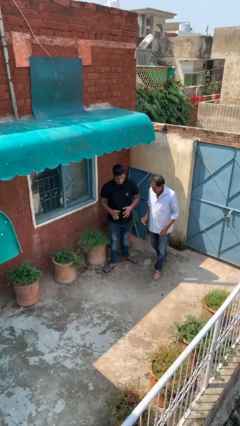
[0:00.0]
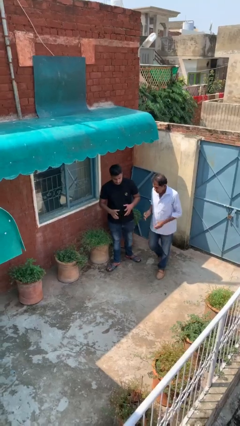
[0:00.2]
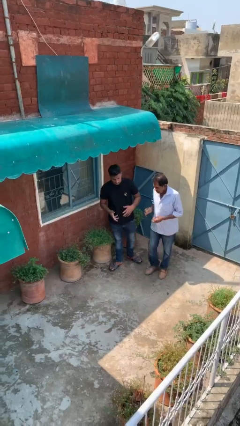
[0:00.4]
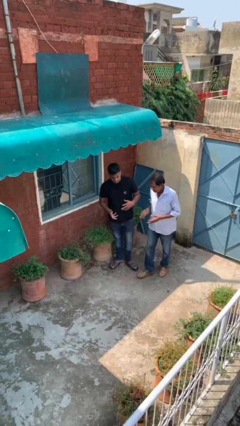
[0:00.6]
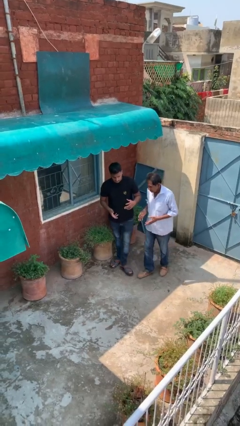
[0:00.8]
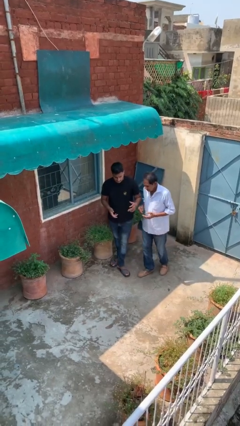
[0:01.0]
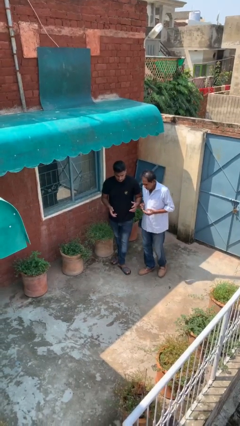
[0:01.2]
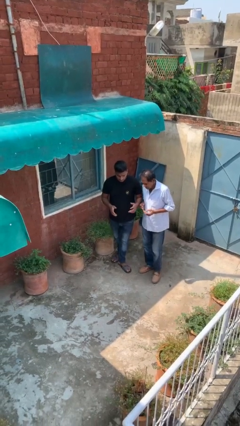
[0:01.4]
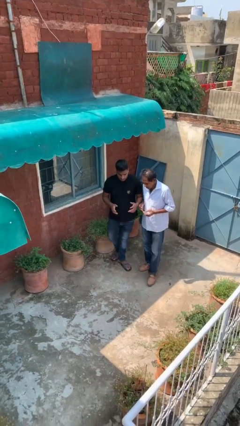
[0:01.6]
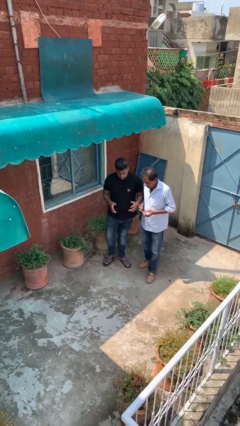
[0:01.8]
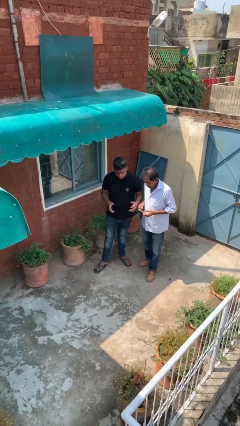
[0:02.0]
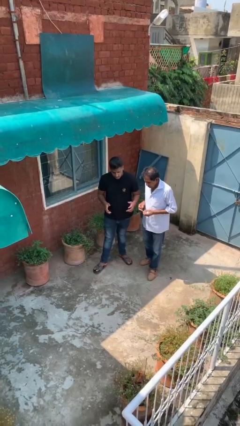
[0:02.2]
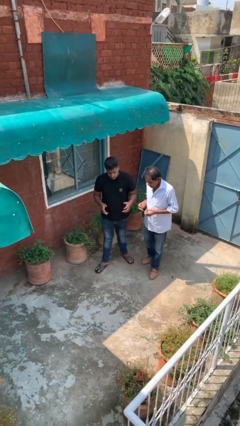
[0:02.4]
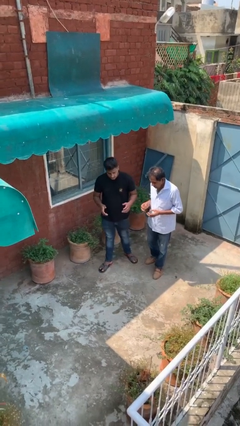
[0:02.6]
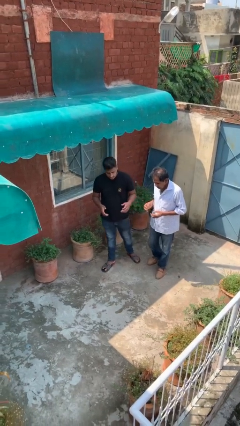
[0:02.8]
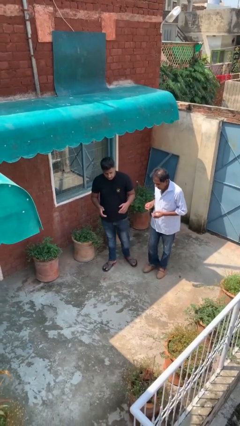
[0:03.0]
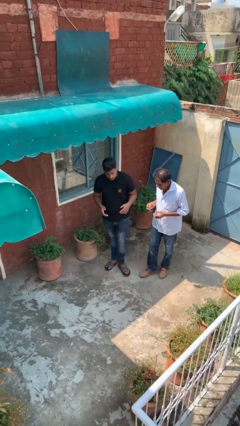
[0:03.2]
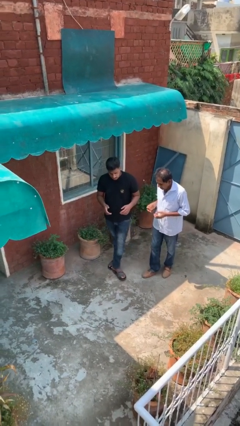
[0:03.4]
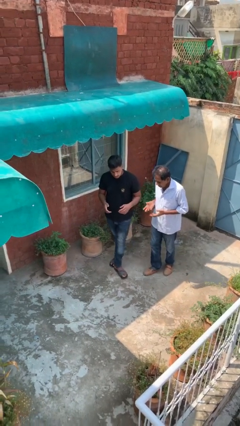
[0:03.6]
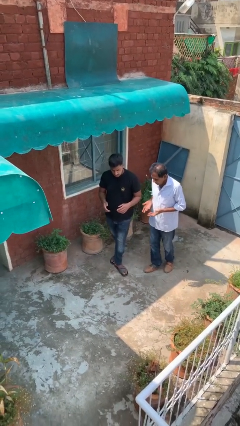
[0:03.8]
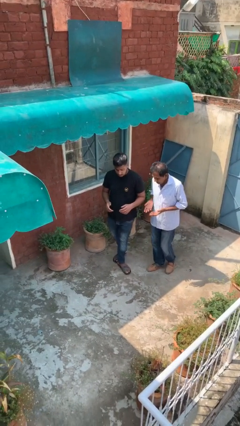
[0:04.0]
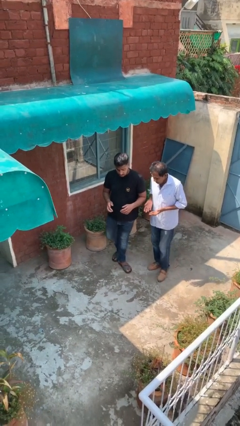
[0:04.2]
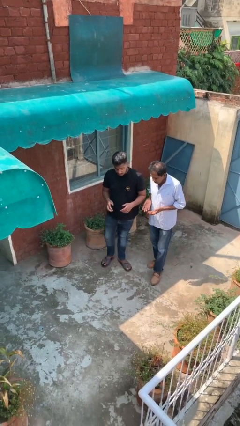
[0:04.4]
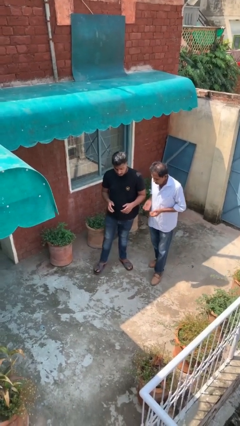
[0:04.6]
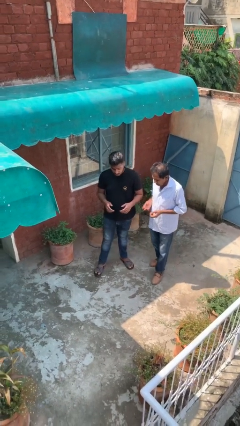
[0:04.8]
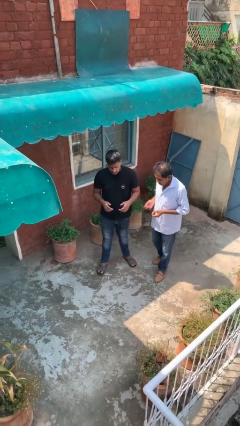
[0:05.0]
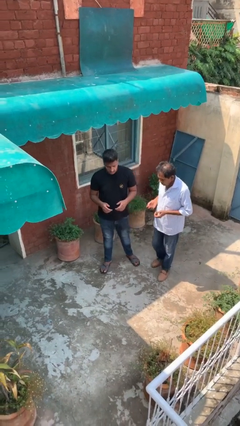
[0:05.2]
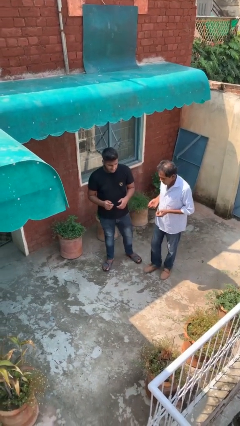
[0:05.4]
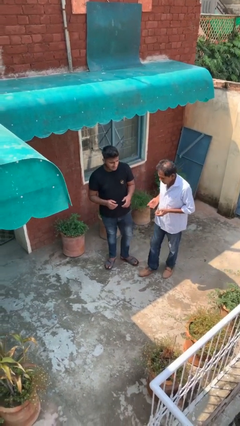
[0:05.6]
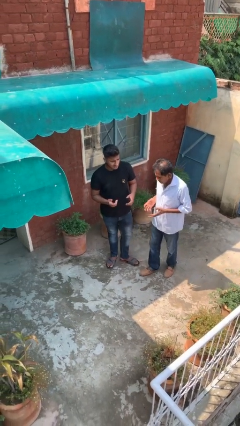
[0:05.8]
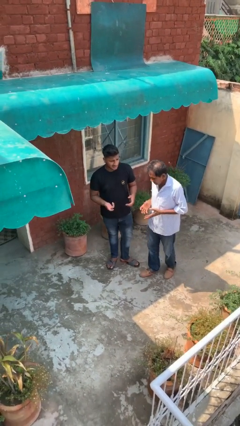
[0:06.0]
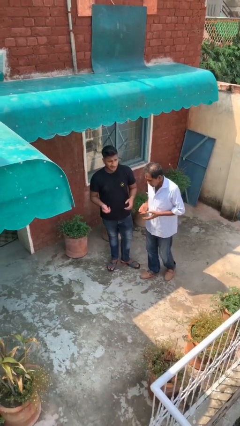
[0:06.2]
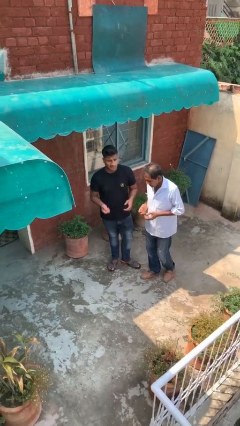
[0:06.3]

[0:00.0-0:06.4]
person talks to person

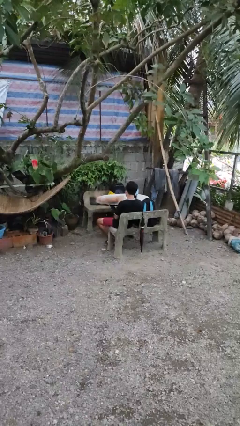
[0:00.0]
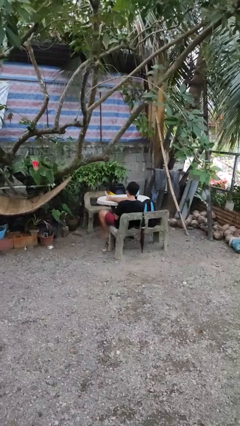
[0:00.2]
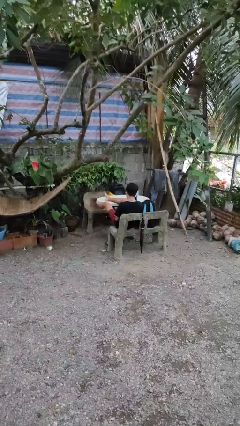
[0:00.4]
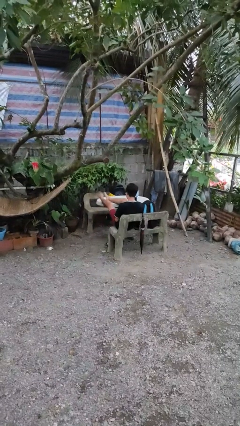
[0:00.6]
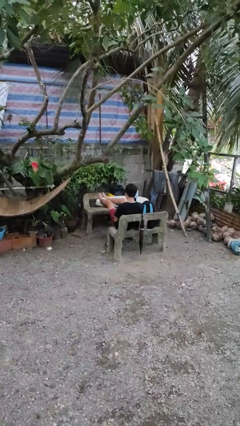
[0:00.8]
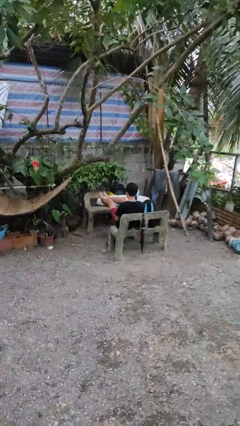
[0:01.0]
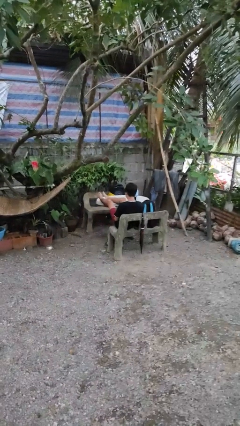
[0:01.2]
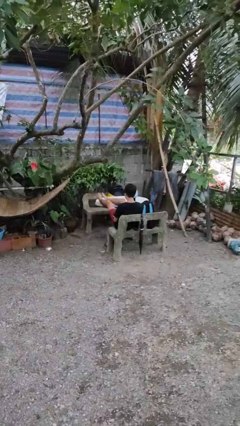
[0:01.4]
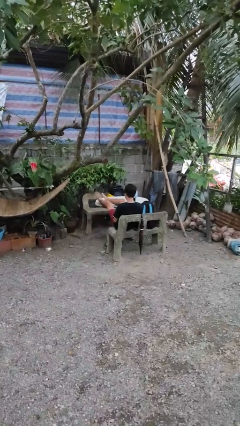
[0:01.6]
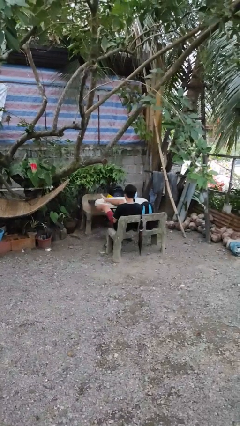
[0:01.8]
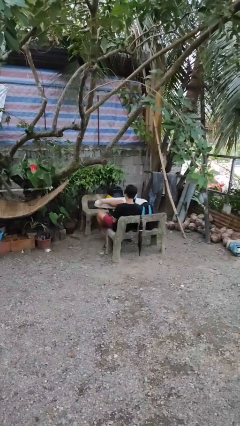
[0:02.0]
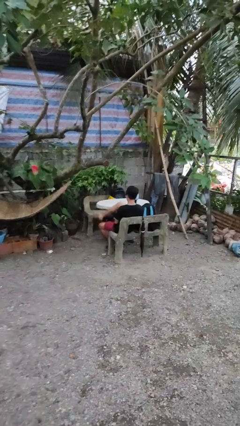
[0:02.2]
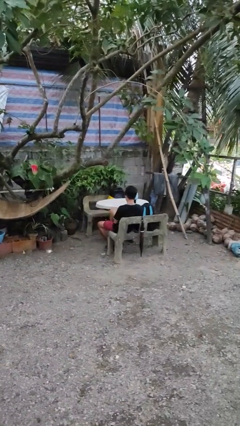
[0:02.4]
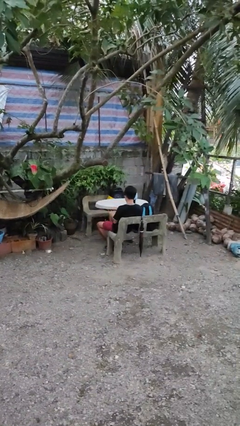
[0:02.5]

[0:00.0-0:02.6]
person puts feet up

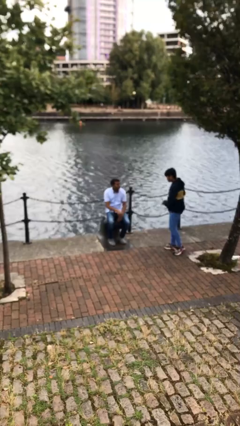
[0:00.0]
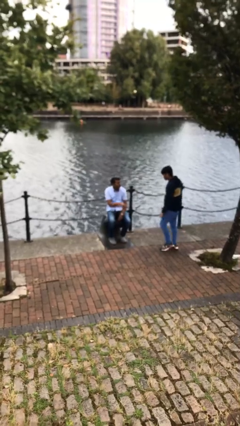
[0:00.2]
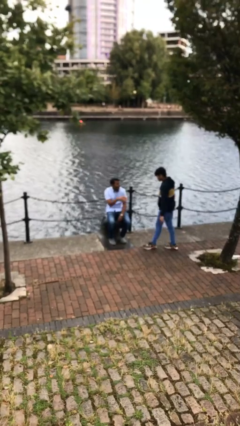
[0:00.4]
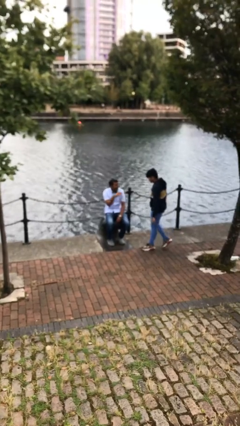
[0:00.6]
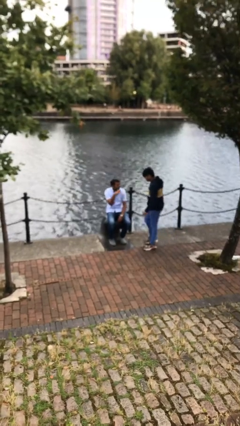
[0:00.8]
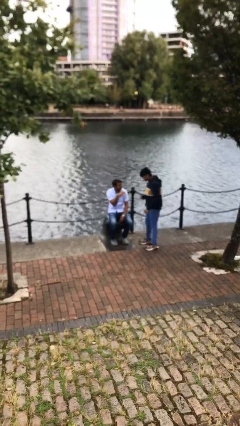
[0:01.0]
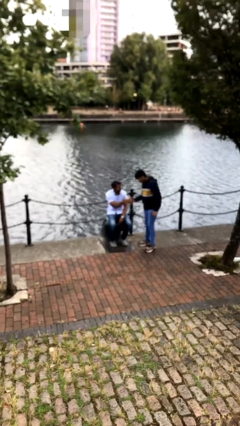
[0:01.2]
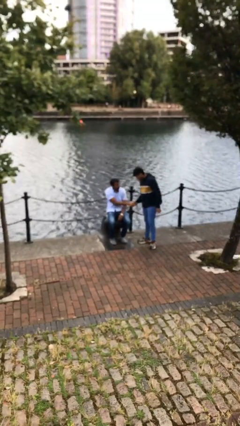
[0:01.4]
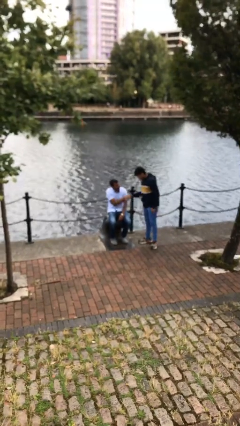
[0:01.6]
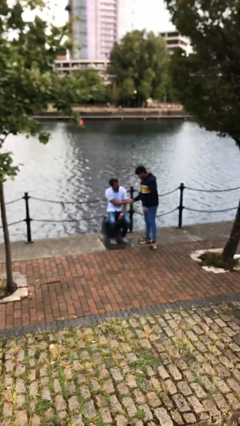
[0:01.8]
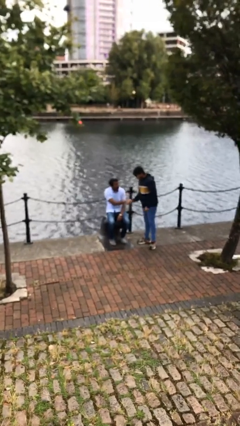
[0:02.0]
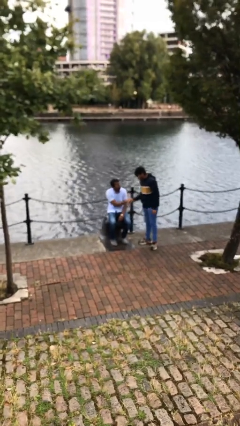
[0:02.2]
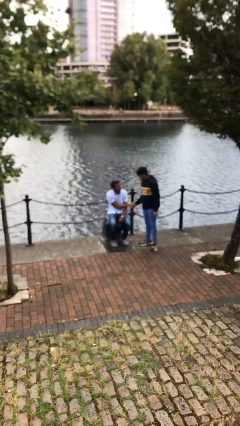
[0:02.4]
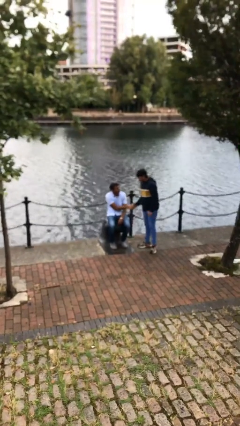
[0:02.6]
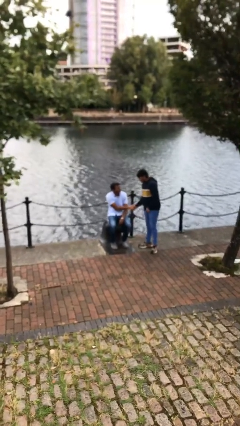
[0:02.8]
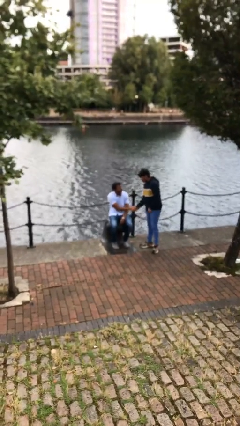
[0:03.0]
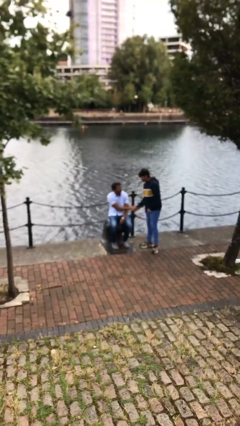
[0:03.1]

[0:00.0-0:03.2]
person shakes hand

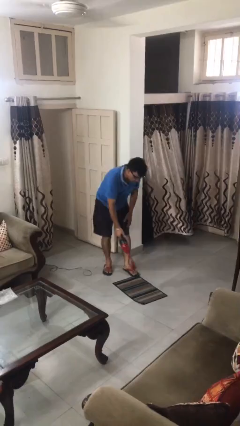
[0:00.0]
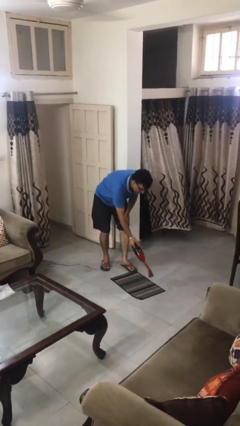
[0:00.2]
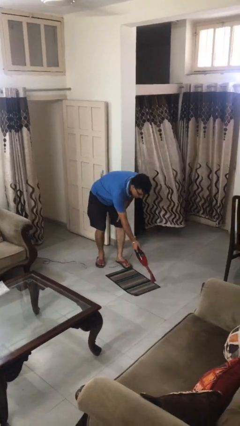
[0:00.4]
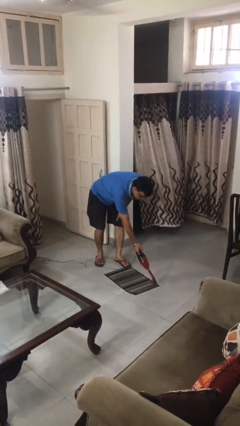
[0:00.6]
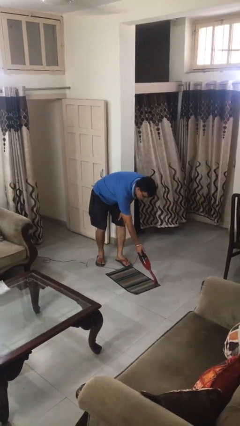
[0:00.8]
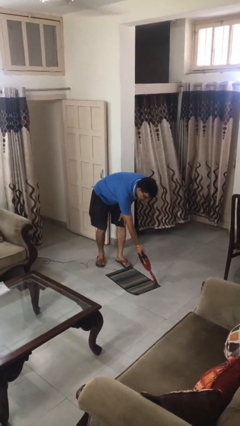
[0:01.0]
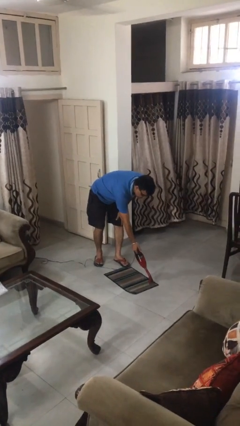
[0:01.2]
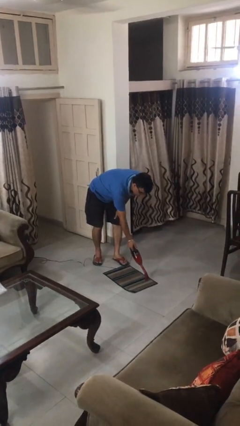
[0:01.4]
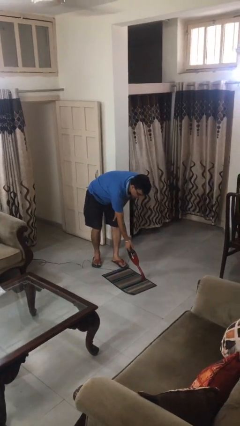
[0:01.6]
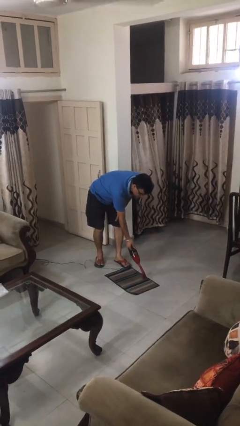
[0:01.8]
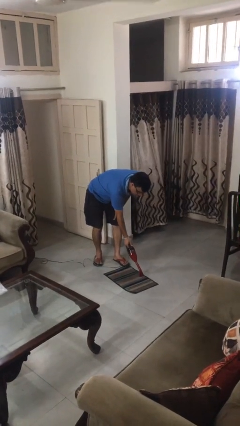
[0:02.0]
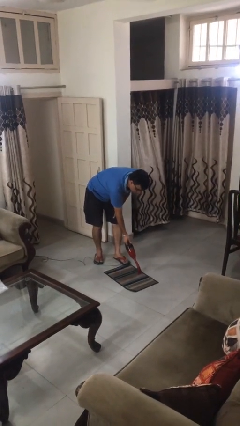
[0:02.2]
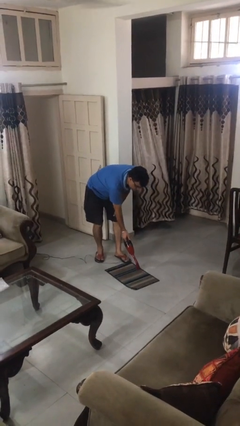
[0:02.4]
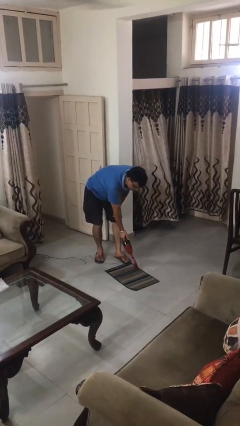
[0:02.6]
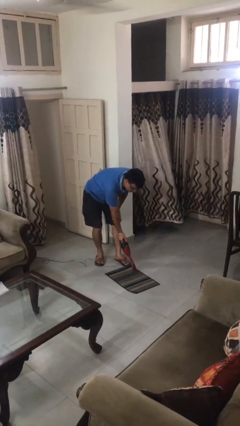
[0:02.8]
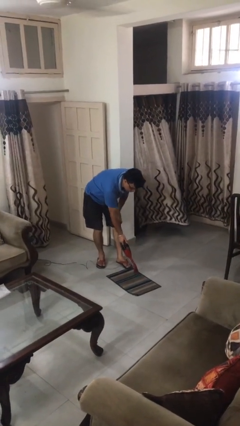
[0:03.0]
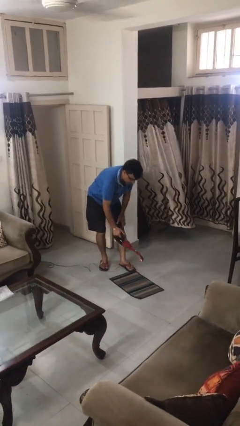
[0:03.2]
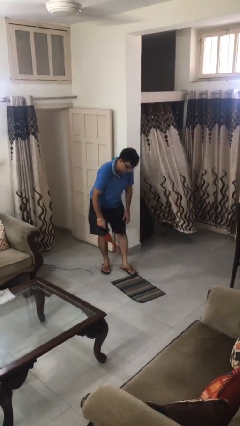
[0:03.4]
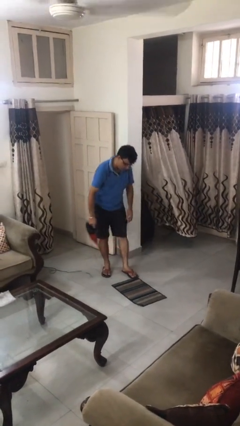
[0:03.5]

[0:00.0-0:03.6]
person vacuums carpet

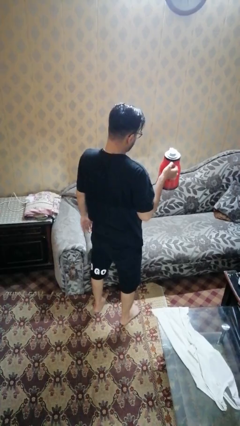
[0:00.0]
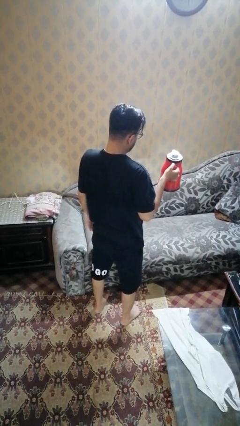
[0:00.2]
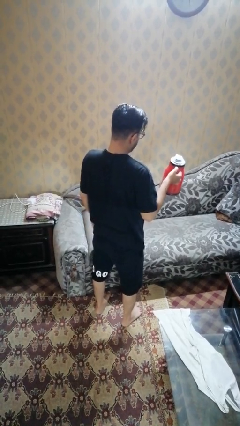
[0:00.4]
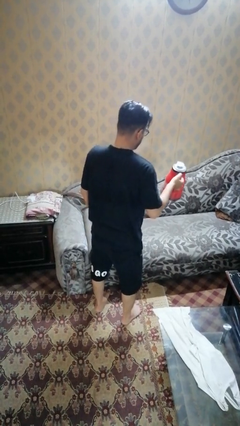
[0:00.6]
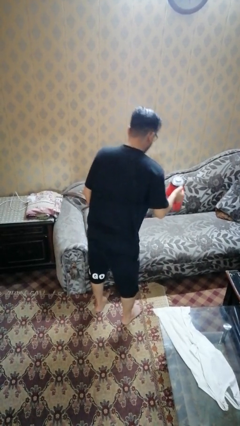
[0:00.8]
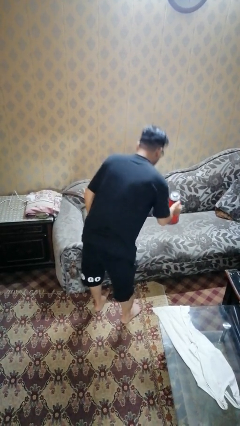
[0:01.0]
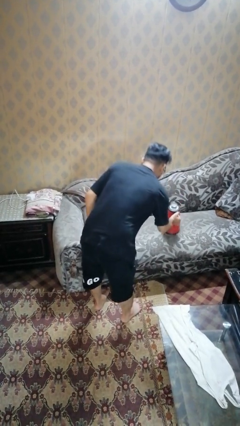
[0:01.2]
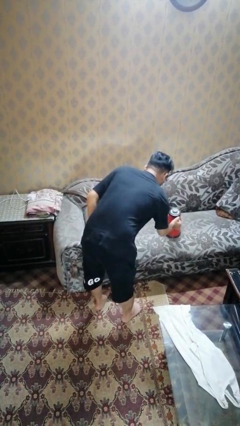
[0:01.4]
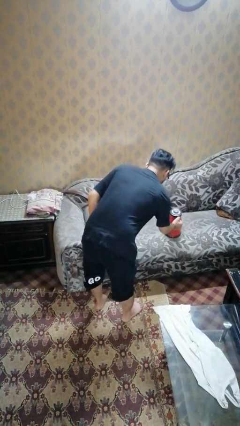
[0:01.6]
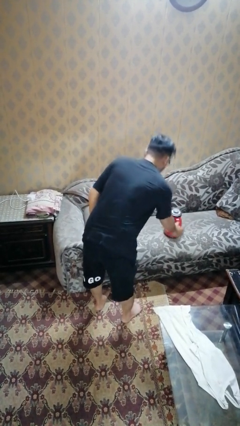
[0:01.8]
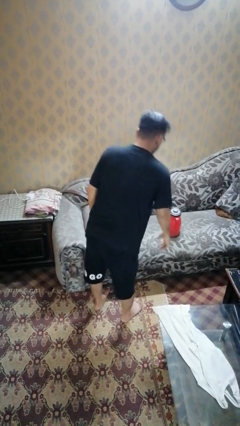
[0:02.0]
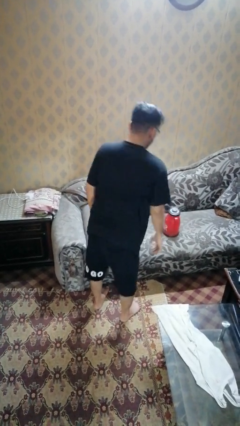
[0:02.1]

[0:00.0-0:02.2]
person puts down object on couch
